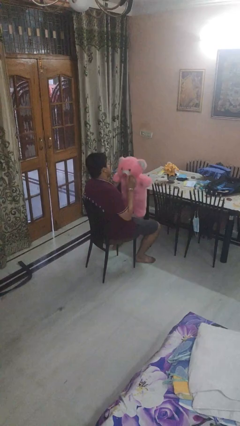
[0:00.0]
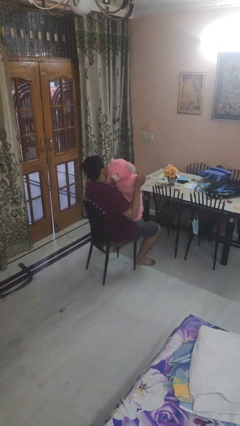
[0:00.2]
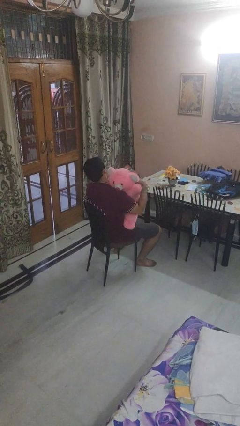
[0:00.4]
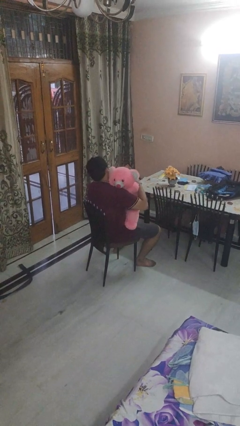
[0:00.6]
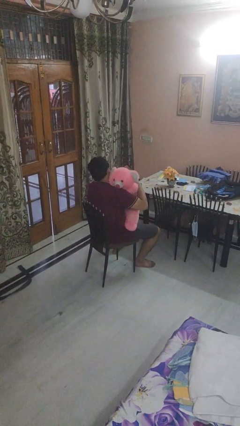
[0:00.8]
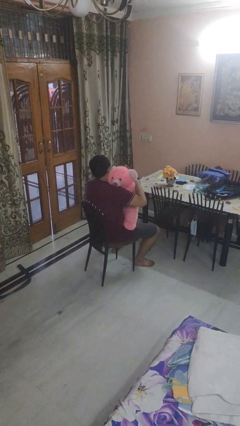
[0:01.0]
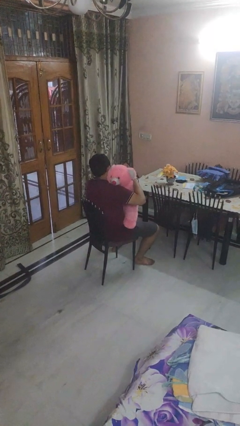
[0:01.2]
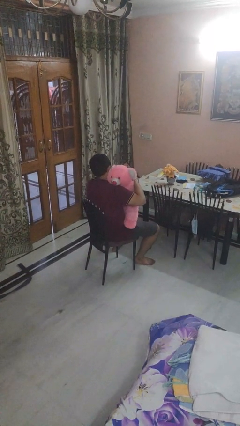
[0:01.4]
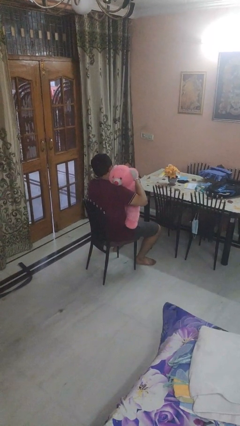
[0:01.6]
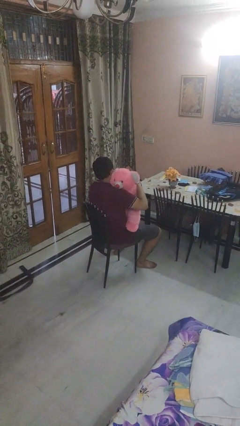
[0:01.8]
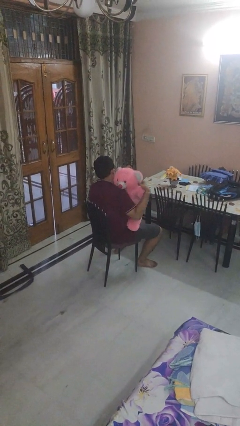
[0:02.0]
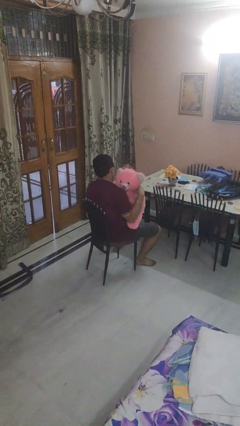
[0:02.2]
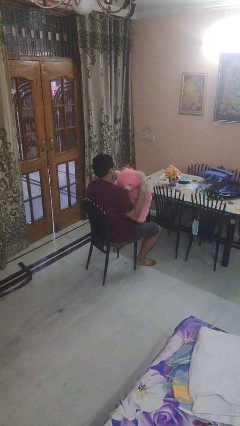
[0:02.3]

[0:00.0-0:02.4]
person hugs stuffed animal

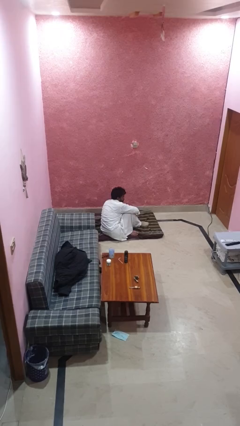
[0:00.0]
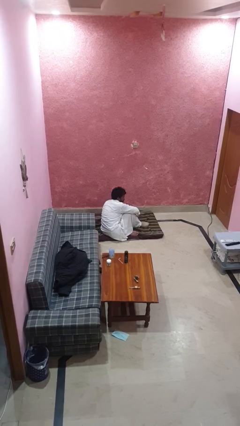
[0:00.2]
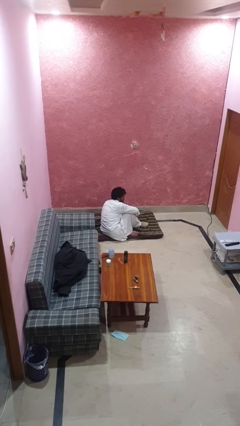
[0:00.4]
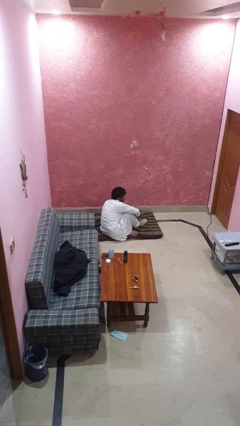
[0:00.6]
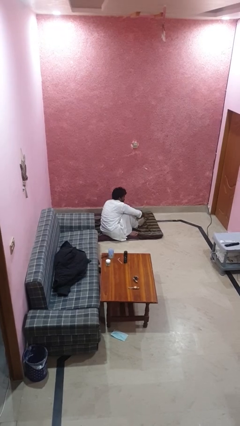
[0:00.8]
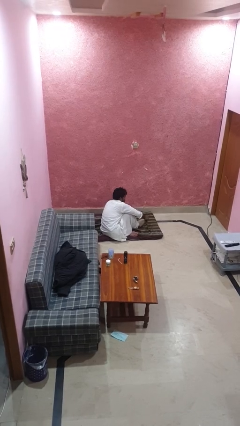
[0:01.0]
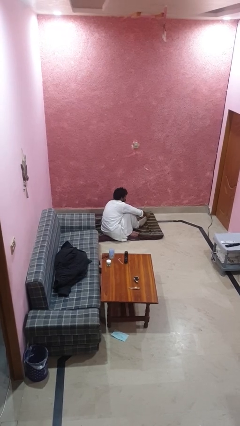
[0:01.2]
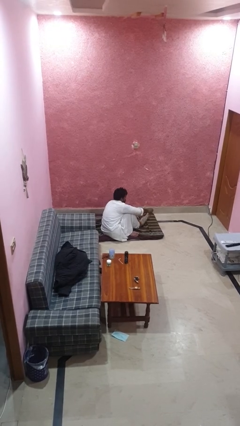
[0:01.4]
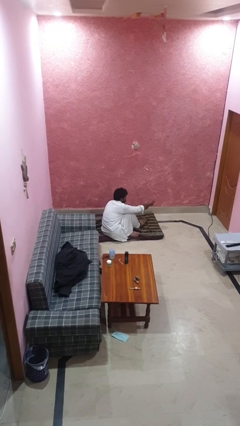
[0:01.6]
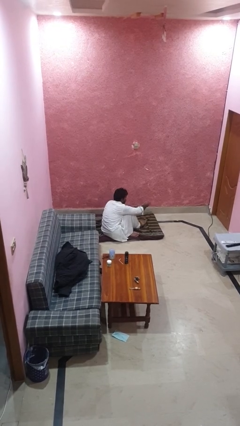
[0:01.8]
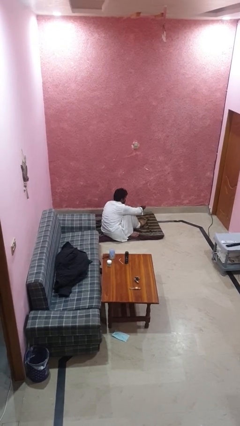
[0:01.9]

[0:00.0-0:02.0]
person takes off socks

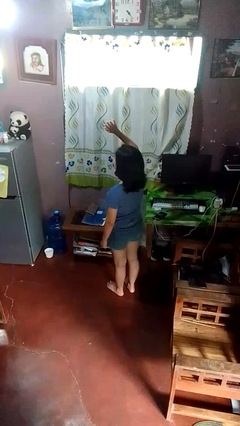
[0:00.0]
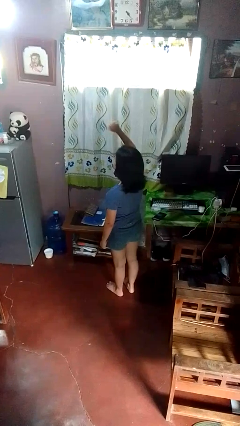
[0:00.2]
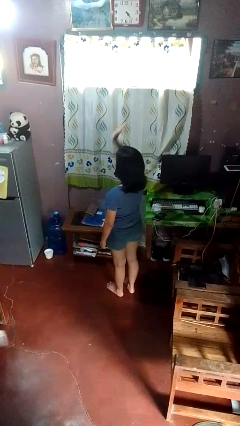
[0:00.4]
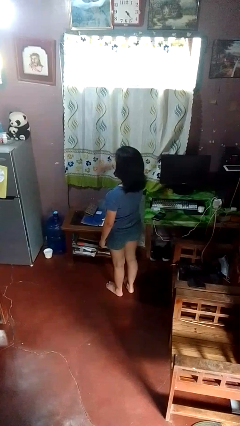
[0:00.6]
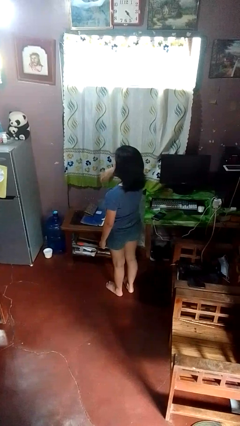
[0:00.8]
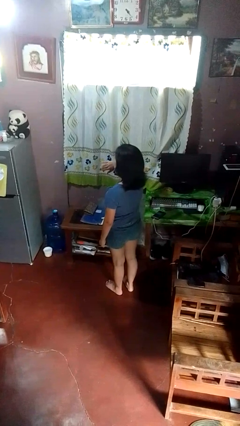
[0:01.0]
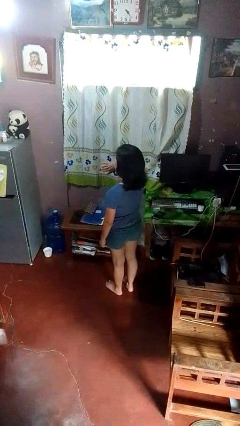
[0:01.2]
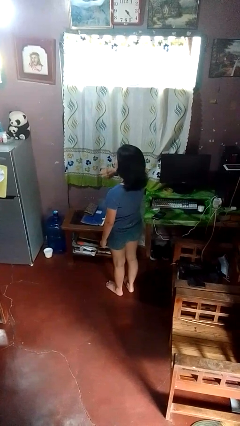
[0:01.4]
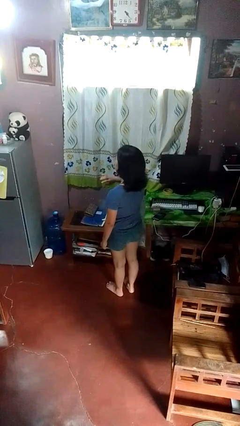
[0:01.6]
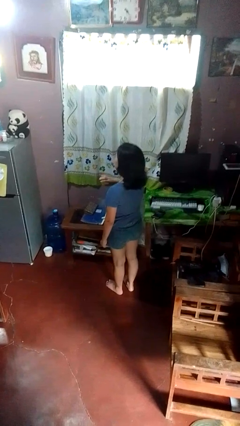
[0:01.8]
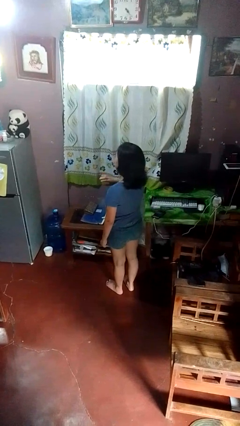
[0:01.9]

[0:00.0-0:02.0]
person gestures swipe down

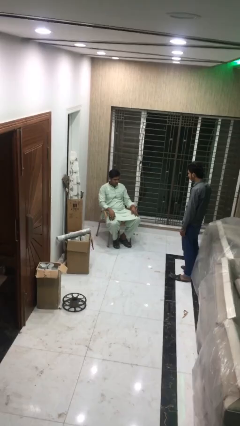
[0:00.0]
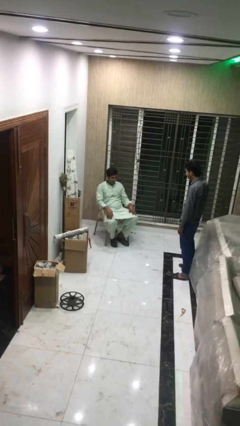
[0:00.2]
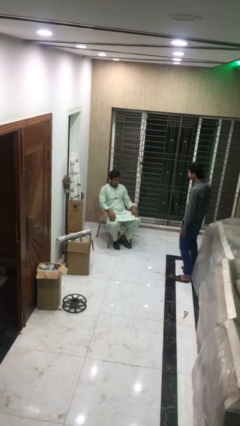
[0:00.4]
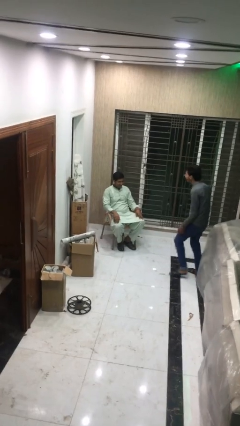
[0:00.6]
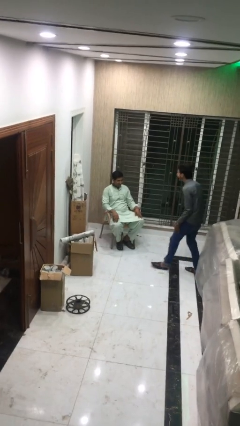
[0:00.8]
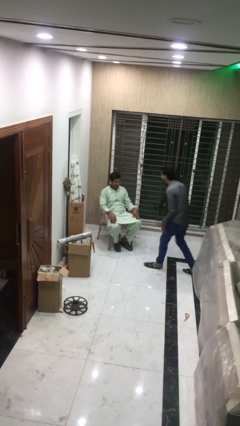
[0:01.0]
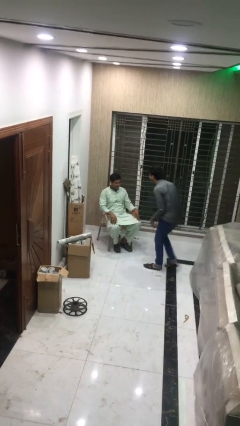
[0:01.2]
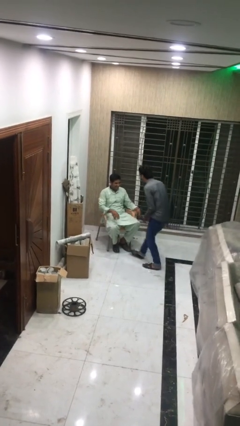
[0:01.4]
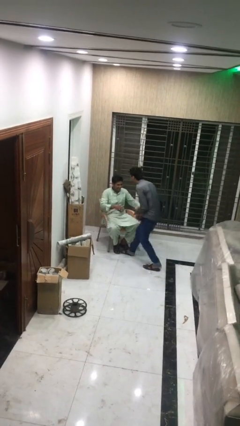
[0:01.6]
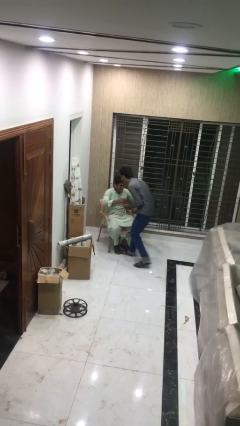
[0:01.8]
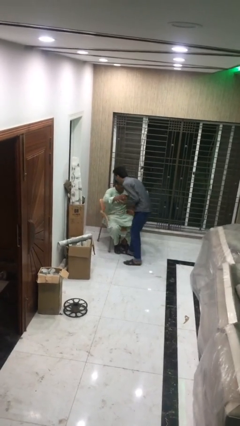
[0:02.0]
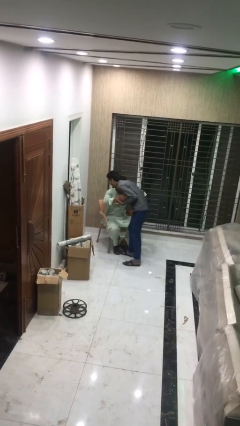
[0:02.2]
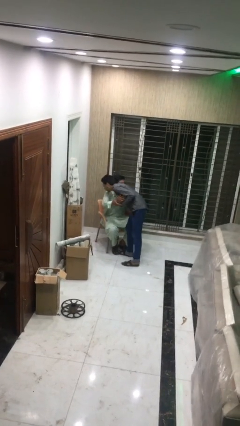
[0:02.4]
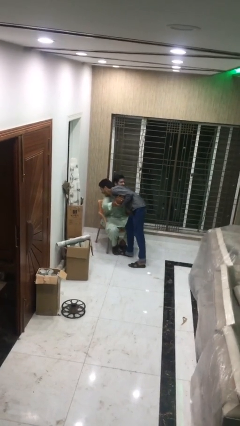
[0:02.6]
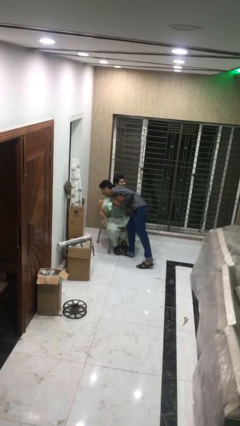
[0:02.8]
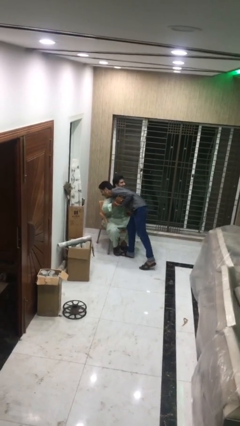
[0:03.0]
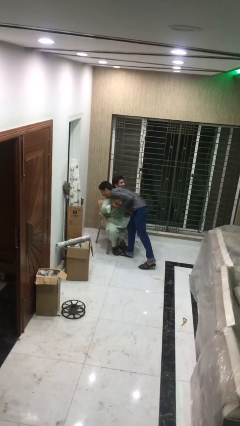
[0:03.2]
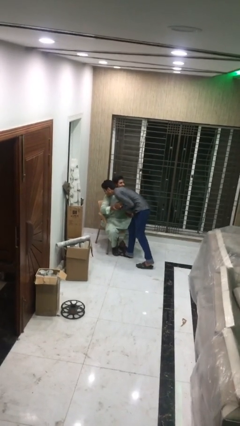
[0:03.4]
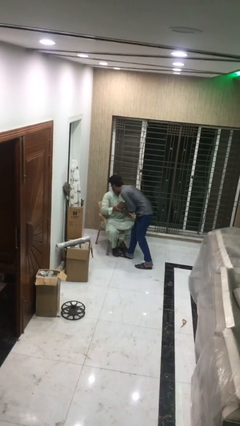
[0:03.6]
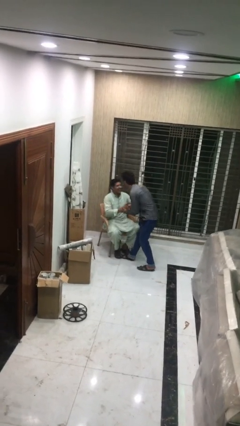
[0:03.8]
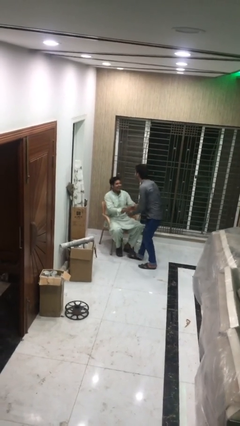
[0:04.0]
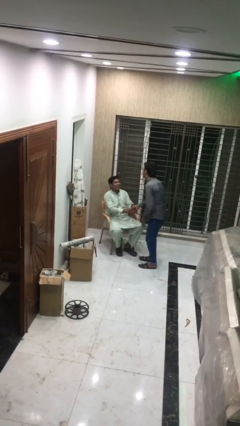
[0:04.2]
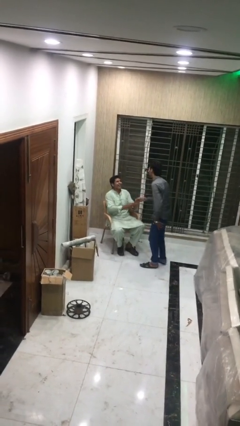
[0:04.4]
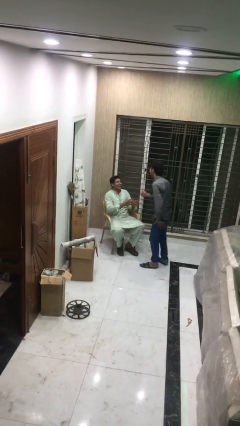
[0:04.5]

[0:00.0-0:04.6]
person embraces person

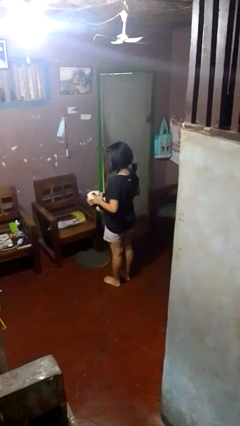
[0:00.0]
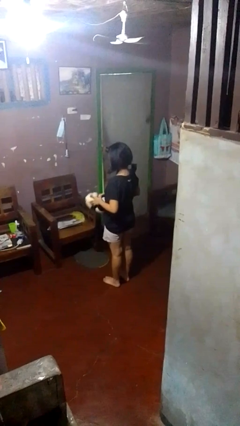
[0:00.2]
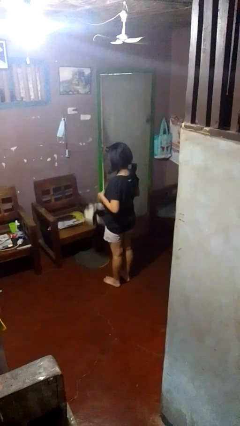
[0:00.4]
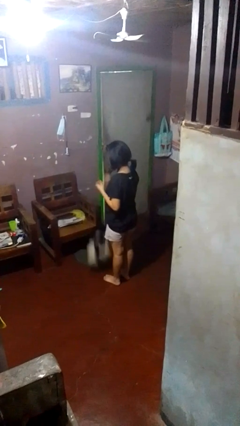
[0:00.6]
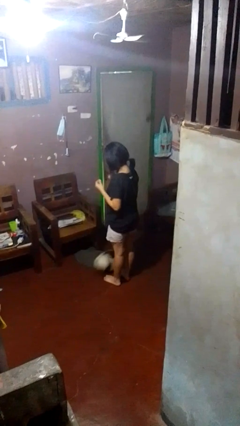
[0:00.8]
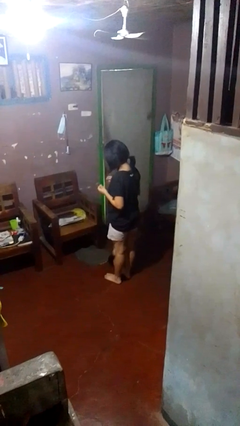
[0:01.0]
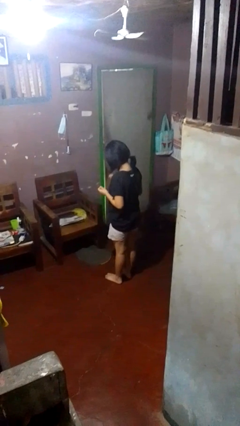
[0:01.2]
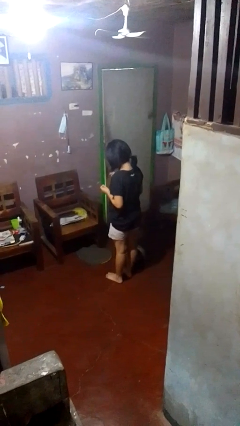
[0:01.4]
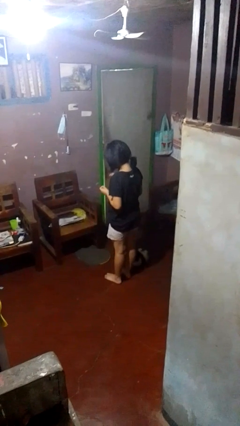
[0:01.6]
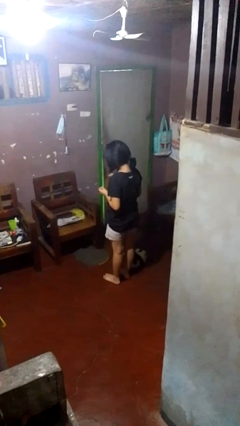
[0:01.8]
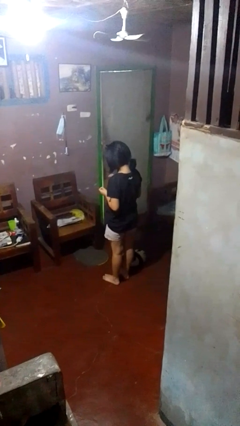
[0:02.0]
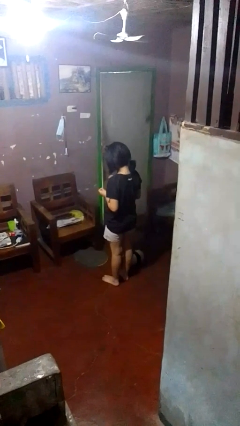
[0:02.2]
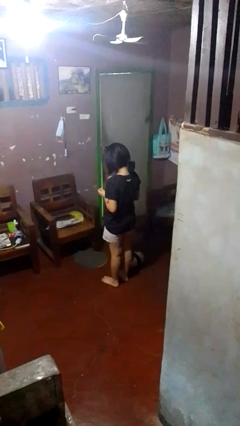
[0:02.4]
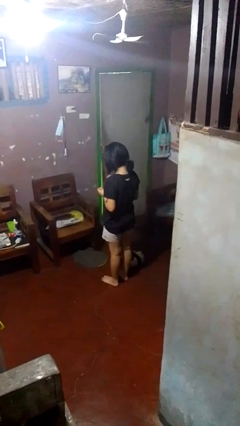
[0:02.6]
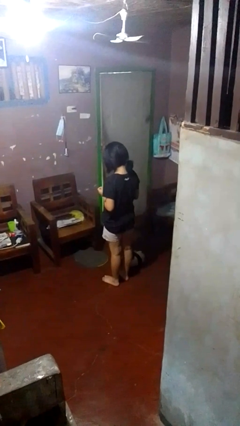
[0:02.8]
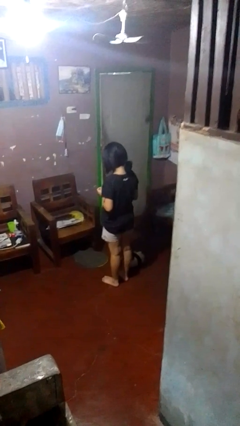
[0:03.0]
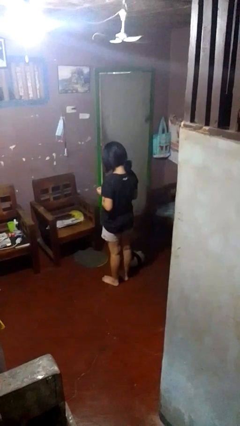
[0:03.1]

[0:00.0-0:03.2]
person drops object

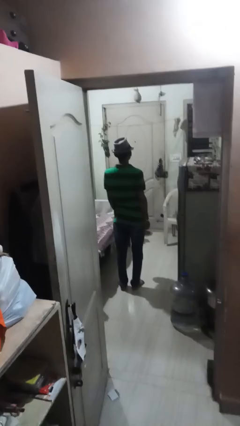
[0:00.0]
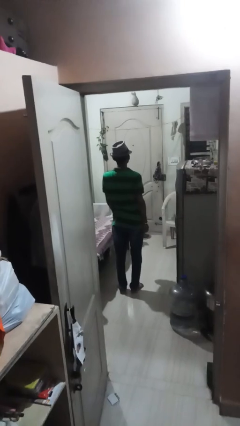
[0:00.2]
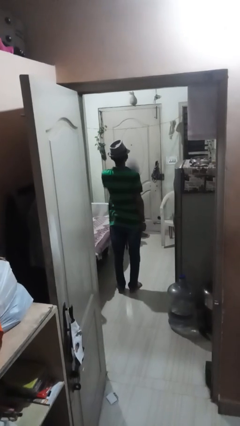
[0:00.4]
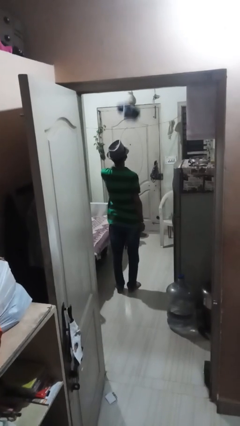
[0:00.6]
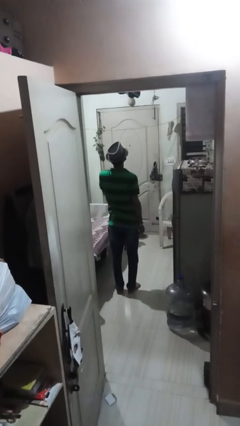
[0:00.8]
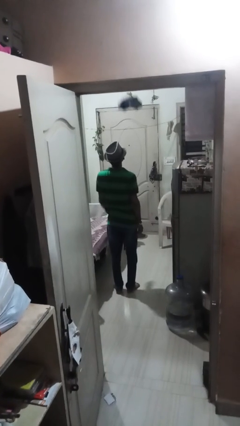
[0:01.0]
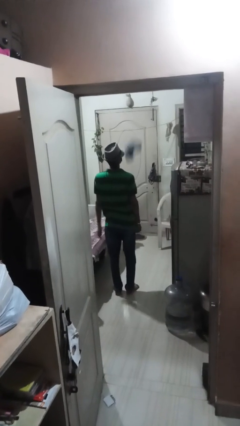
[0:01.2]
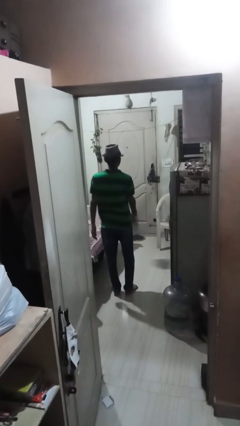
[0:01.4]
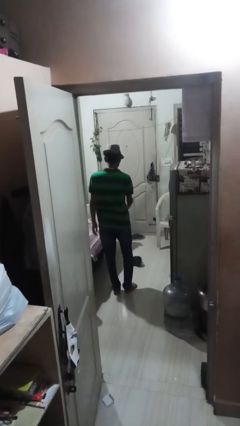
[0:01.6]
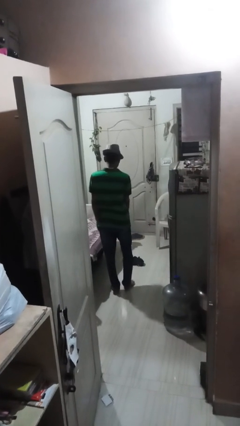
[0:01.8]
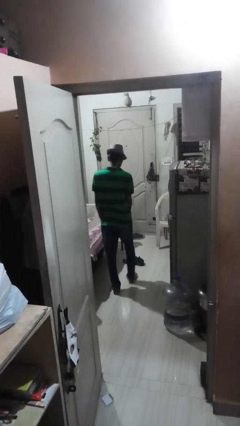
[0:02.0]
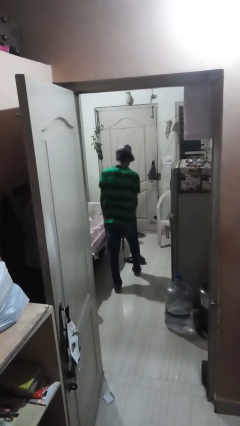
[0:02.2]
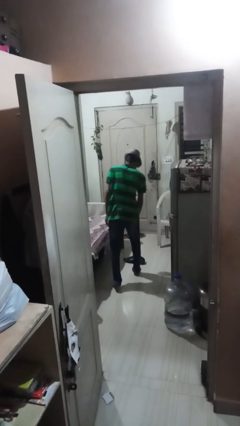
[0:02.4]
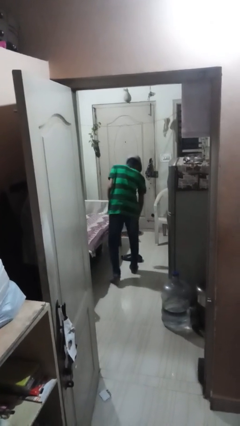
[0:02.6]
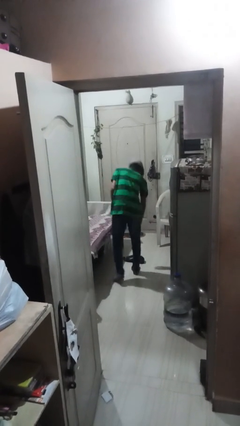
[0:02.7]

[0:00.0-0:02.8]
person throws object into air
